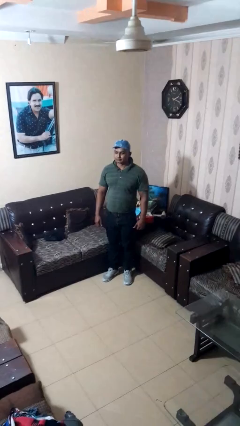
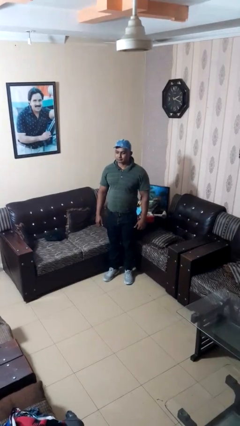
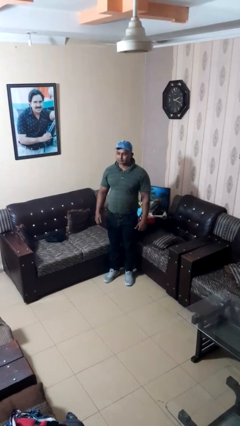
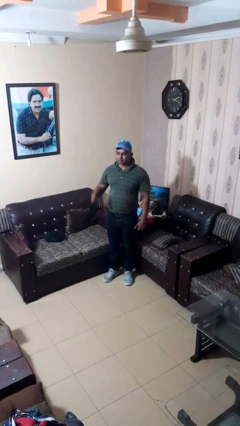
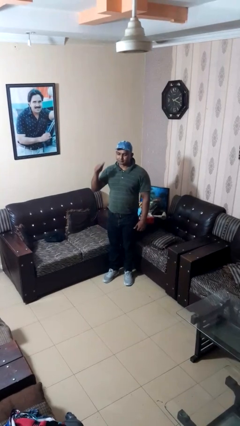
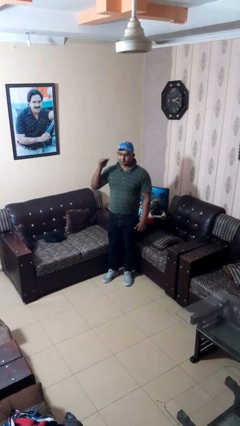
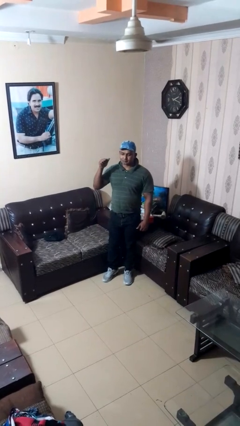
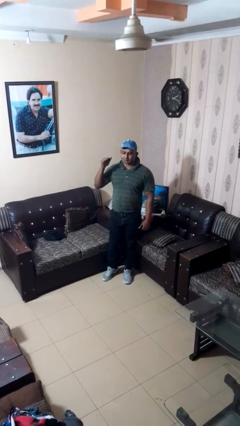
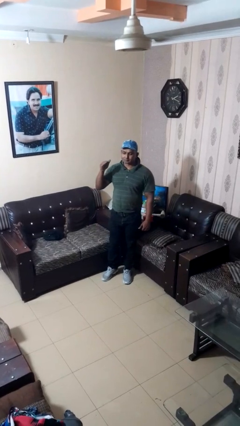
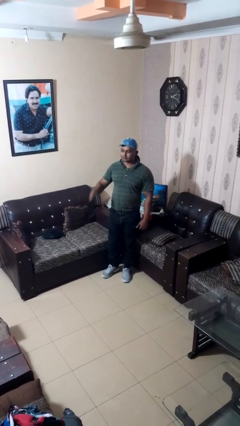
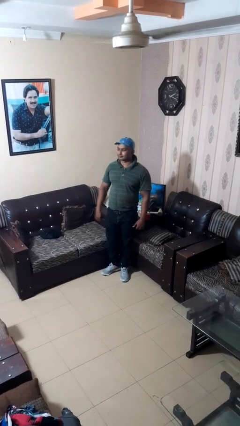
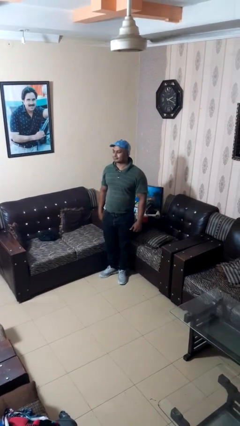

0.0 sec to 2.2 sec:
person gestures behind me

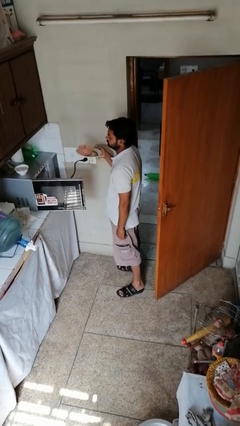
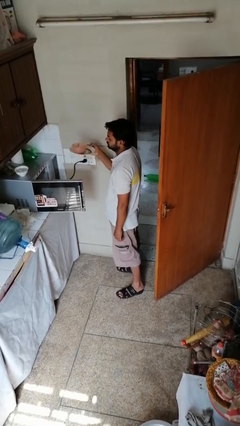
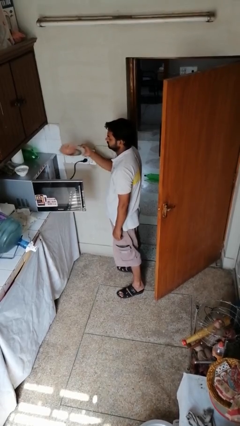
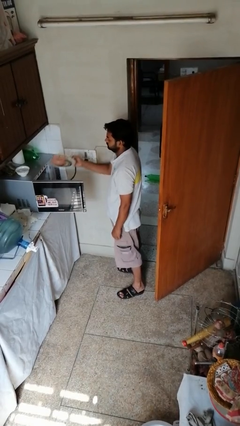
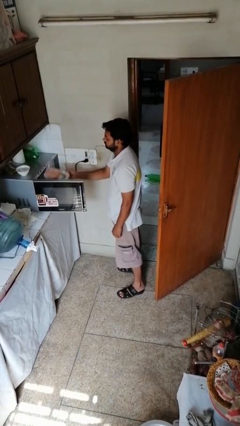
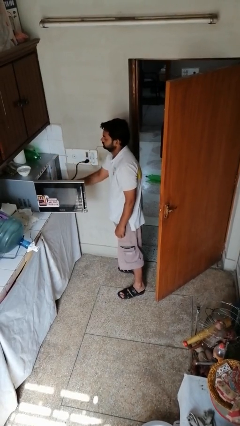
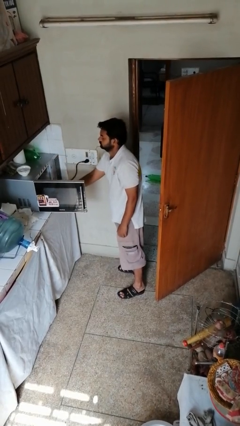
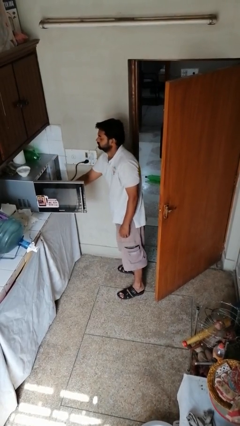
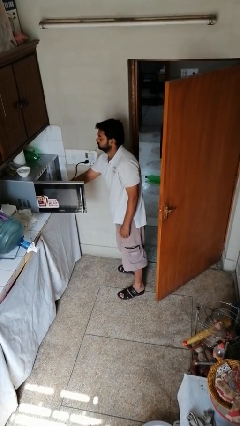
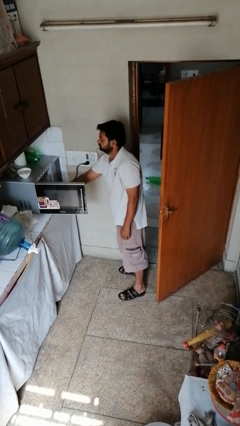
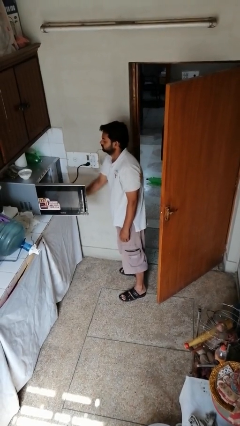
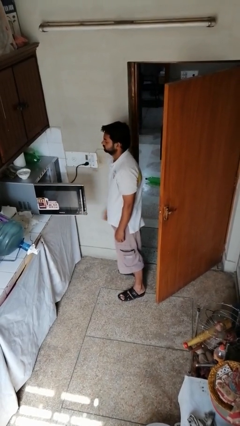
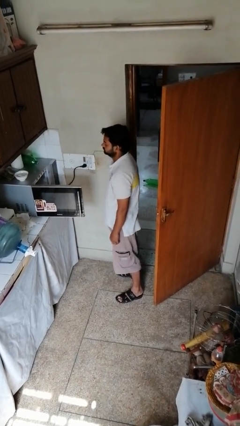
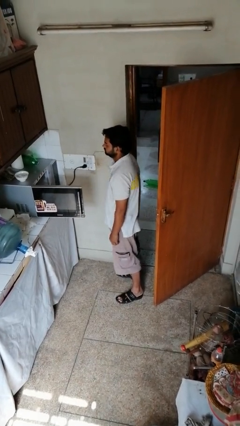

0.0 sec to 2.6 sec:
person puts object into microwave

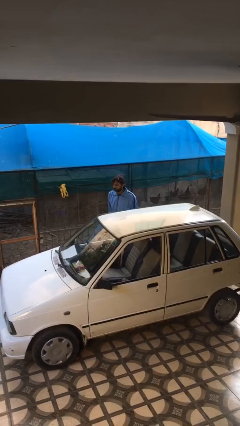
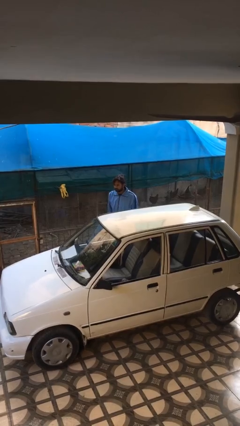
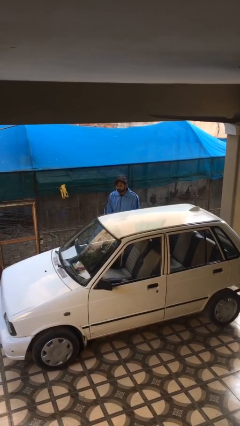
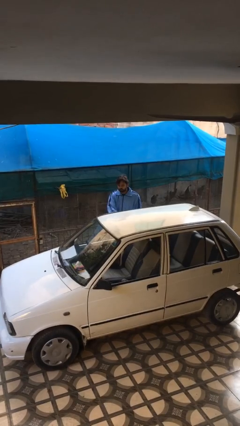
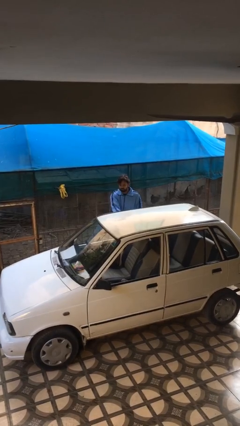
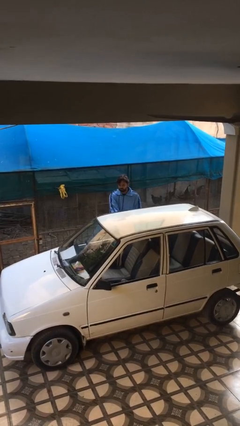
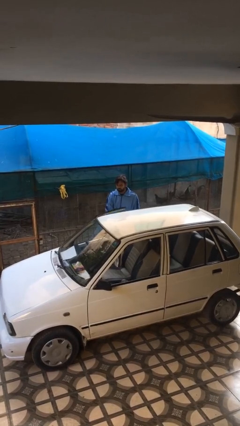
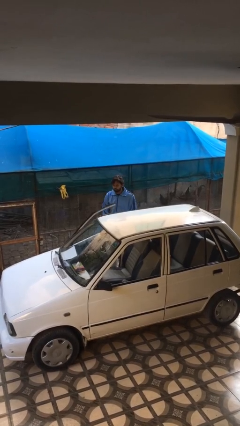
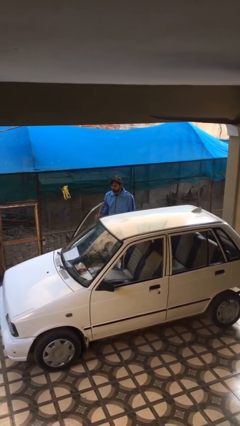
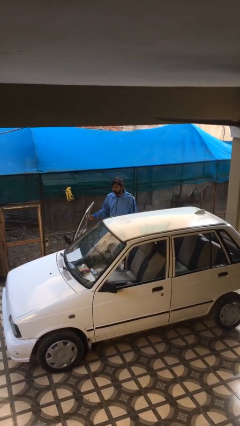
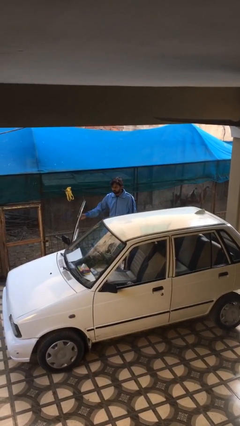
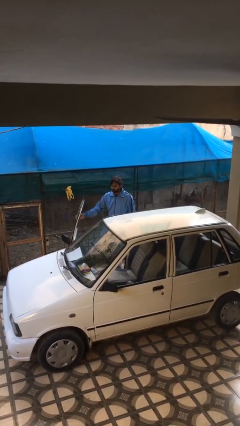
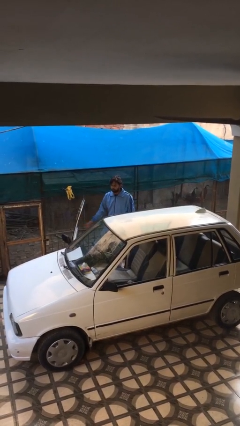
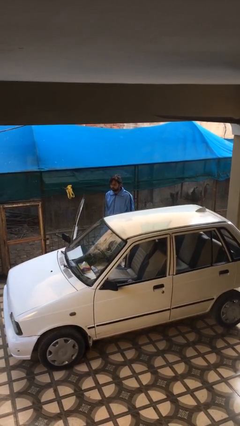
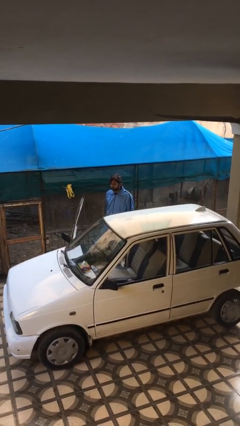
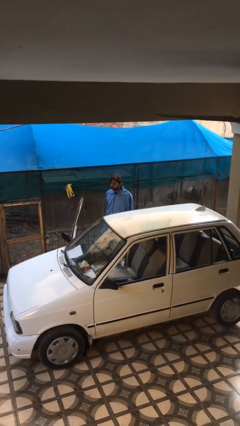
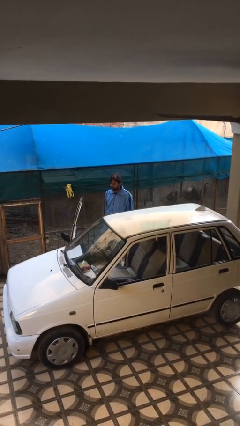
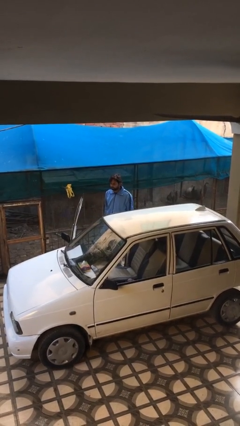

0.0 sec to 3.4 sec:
person opens car door

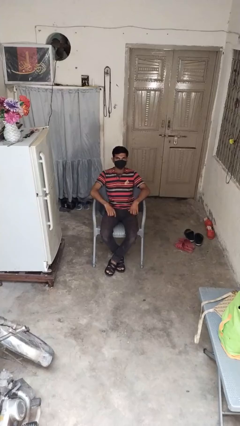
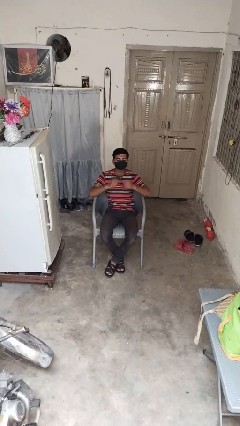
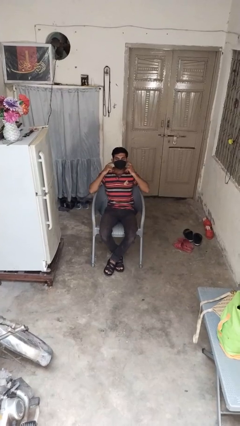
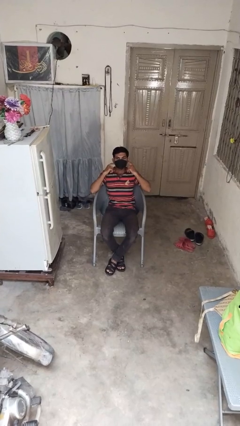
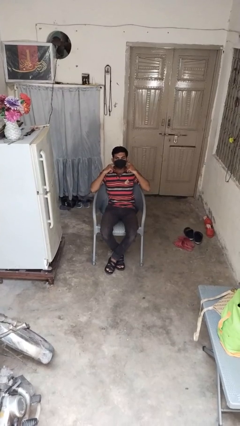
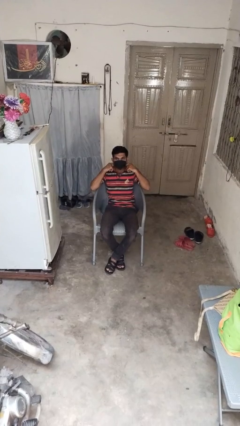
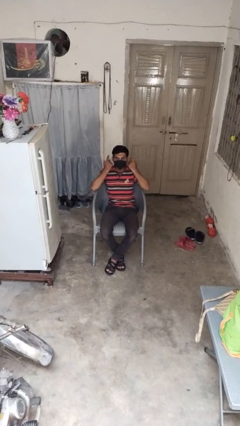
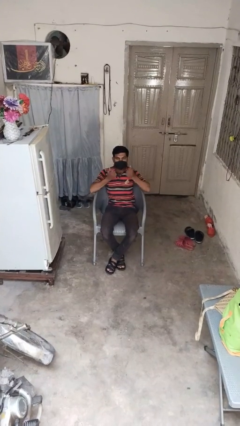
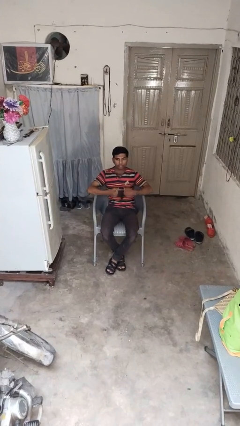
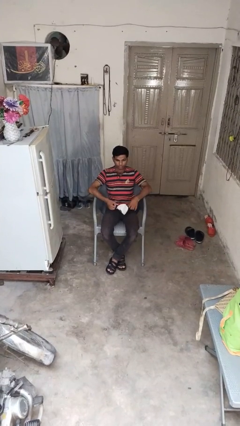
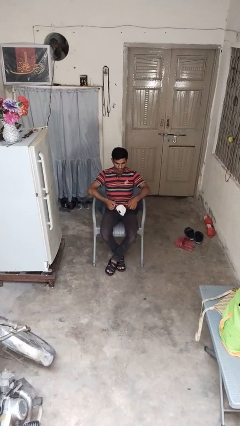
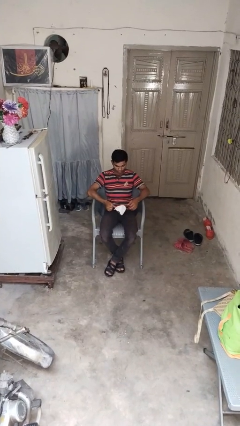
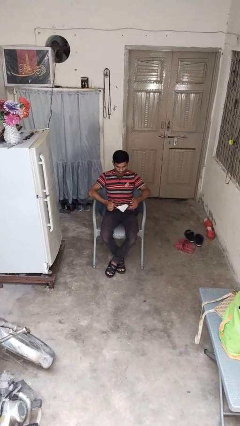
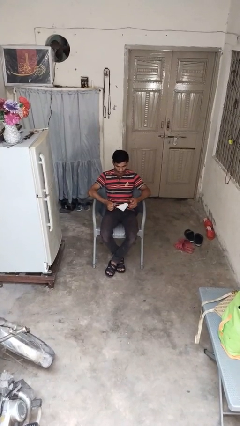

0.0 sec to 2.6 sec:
person takes off facemask

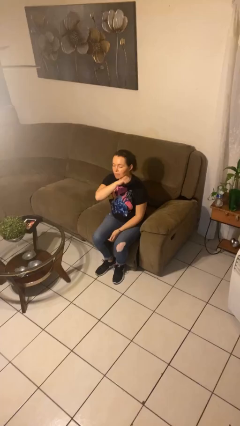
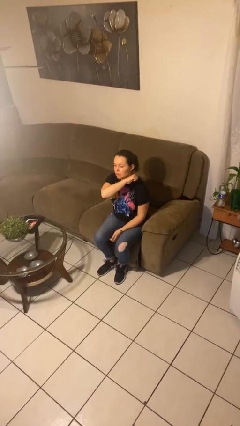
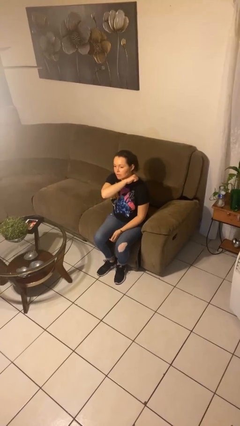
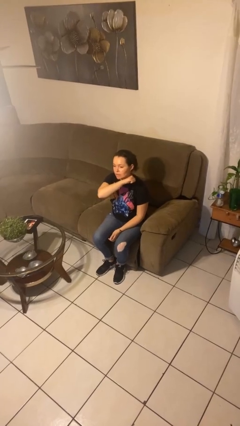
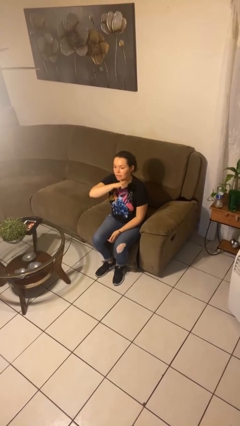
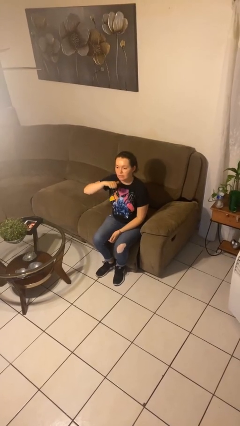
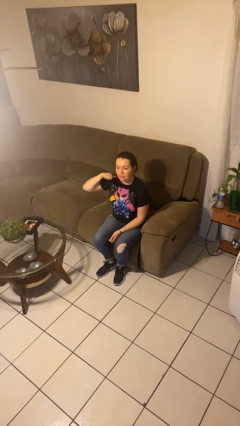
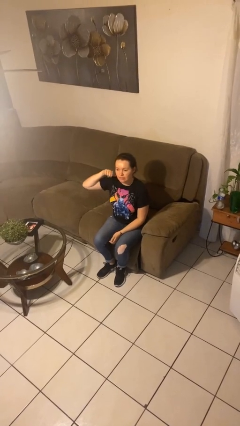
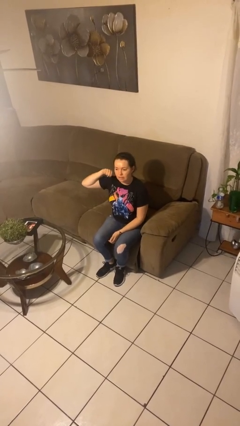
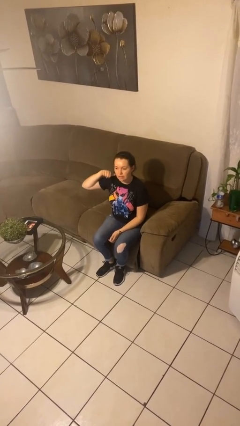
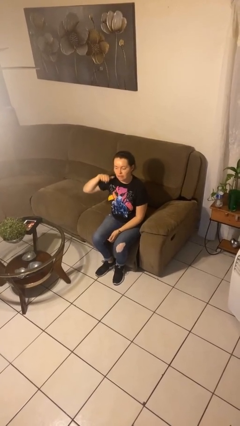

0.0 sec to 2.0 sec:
person gestures cut

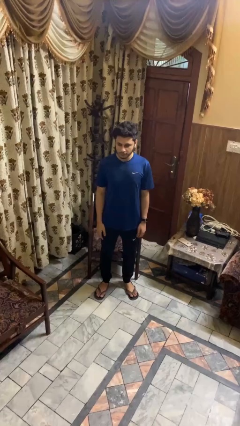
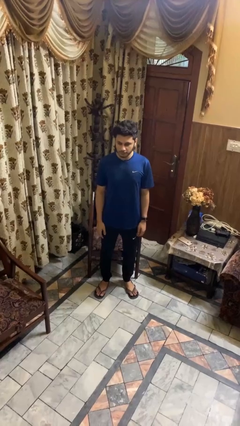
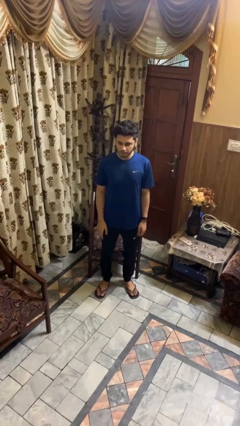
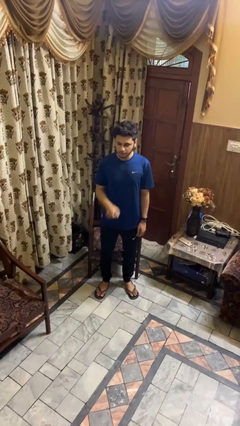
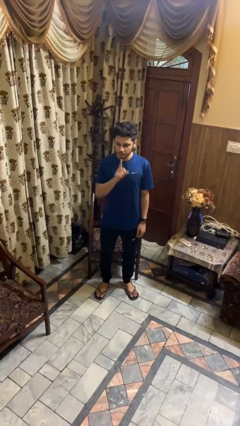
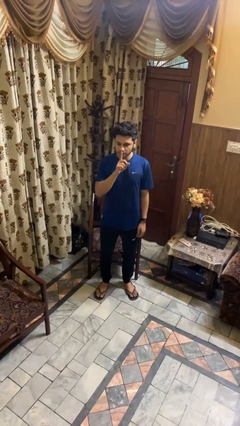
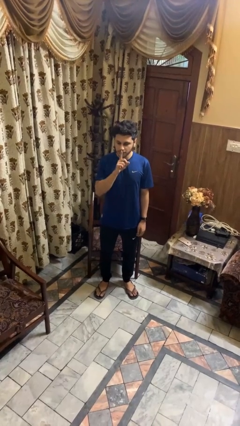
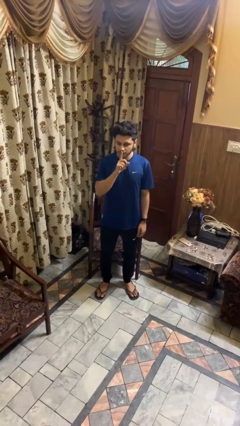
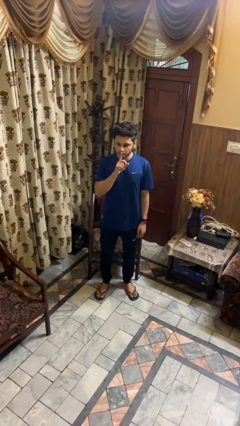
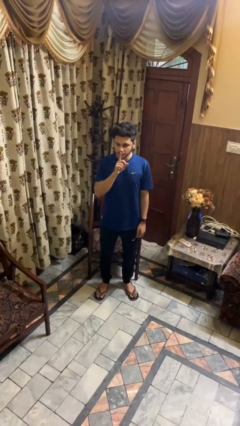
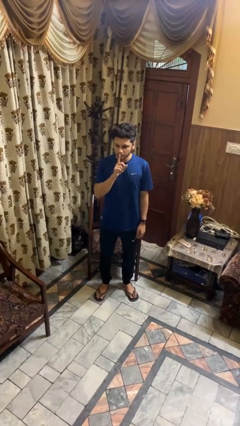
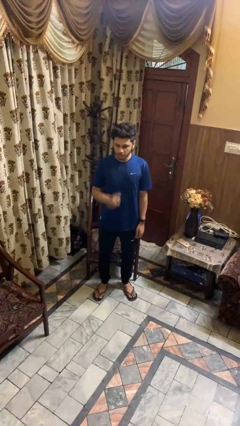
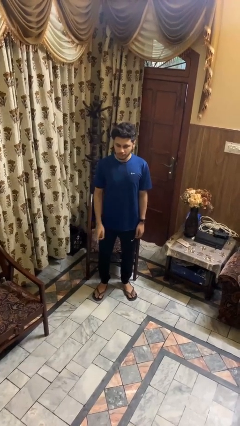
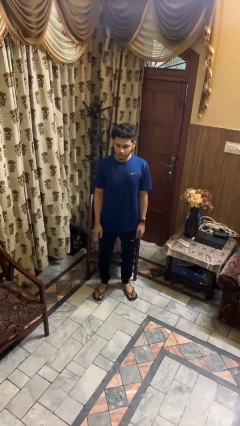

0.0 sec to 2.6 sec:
person gestures be quiet

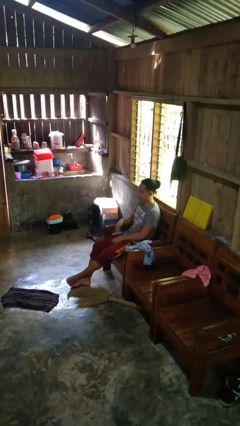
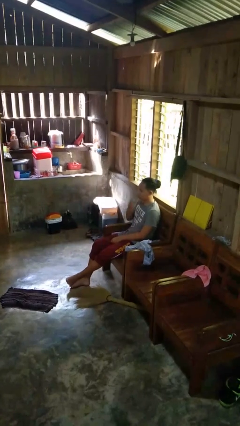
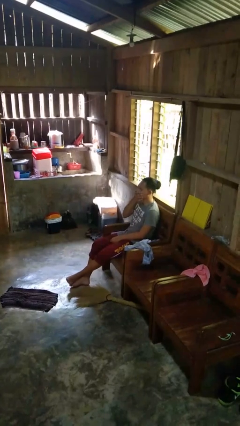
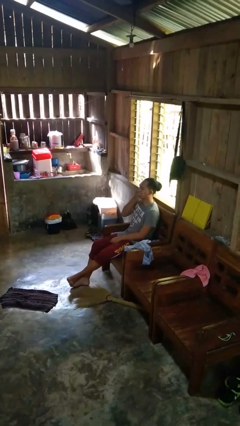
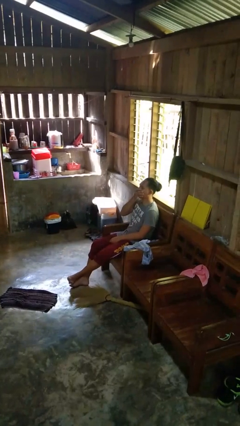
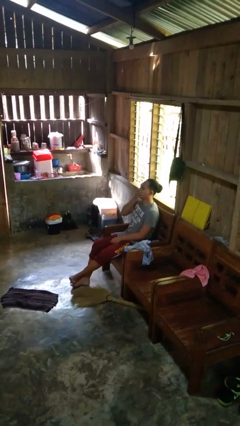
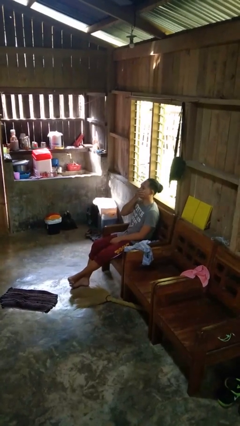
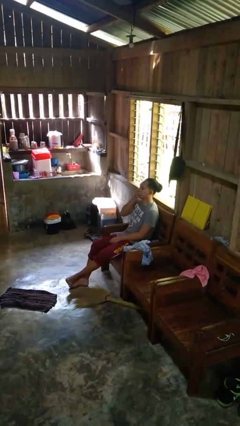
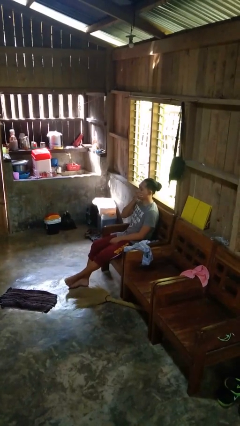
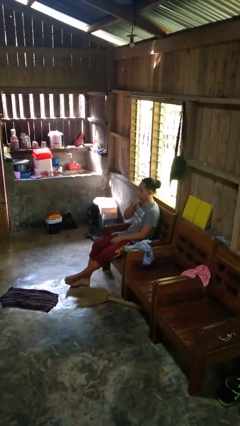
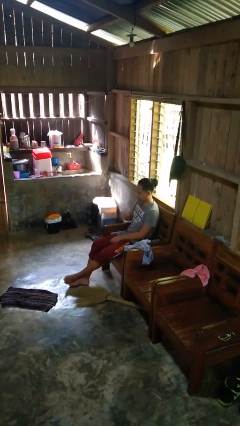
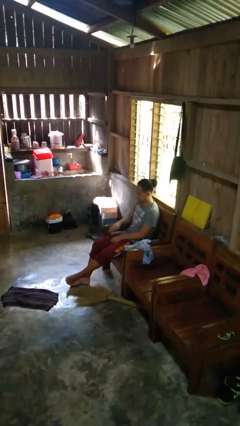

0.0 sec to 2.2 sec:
person yawns
